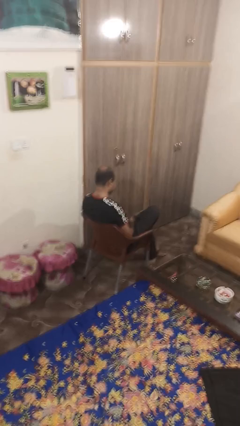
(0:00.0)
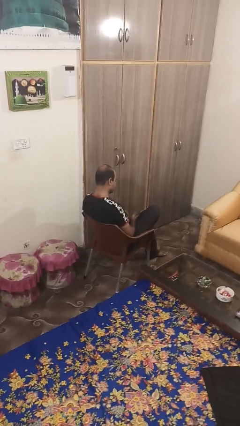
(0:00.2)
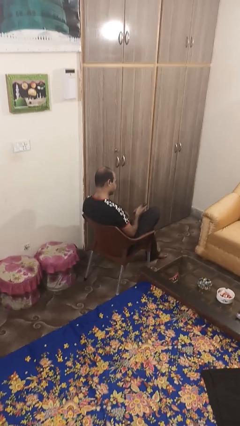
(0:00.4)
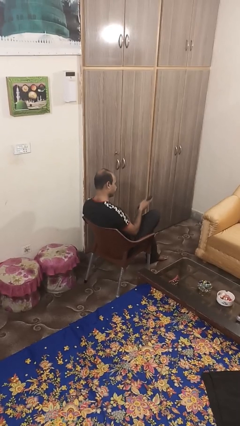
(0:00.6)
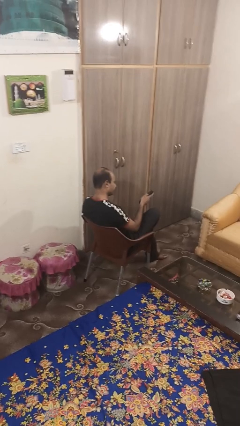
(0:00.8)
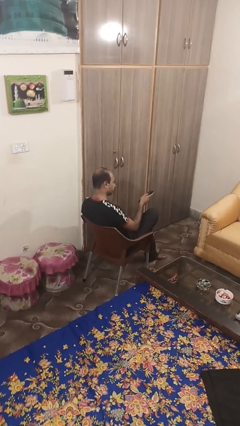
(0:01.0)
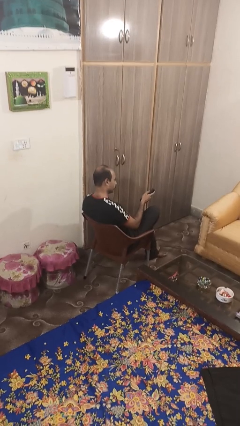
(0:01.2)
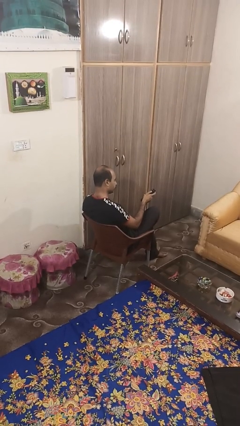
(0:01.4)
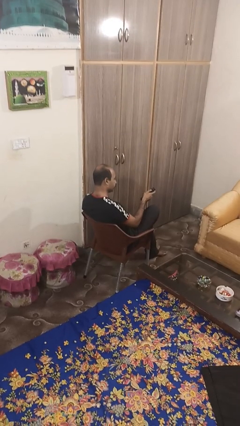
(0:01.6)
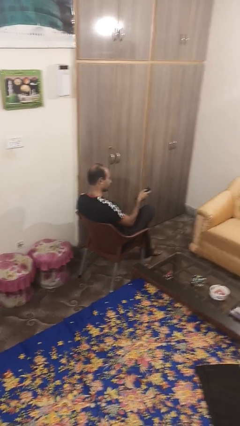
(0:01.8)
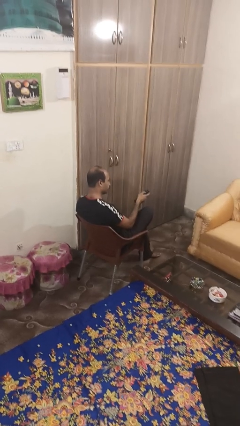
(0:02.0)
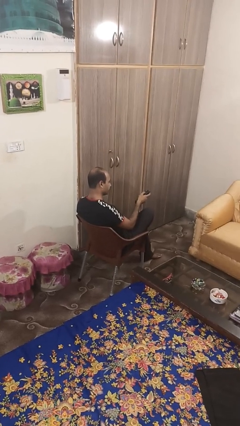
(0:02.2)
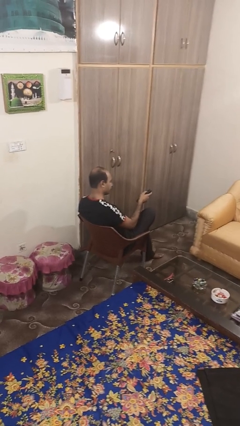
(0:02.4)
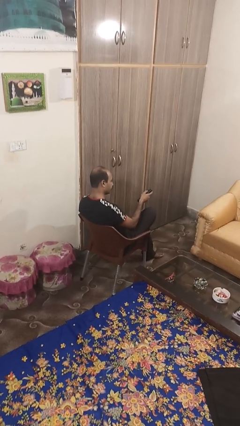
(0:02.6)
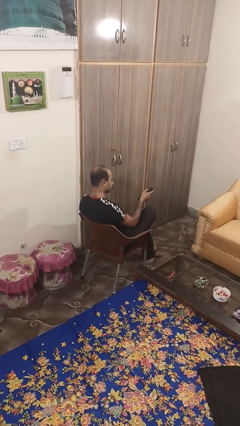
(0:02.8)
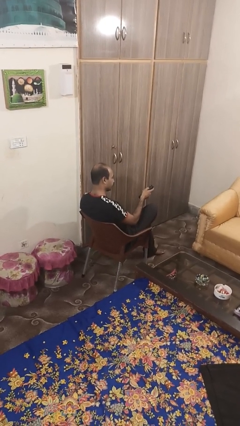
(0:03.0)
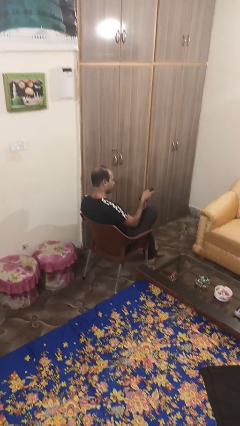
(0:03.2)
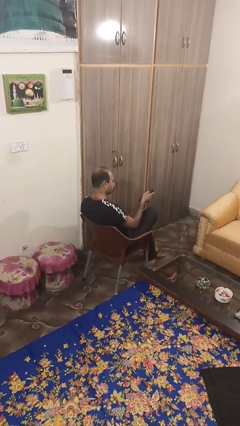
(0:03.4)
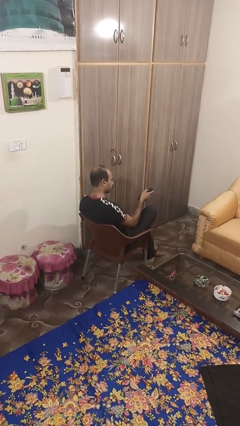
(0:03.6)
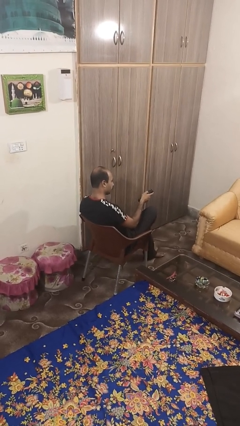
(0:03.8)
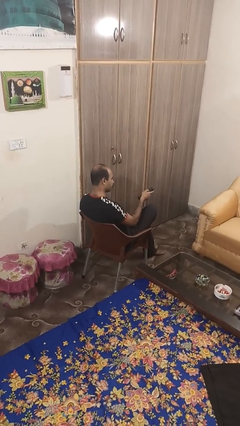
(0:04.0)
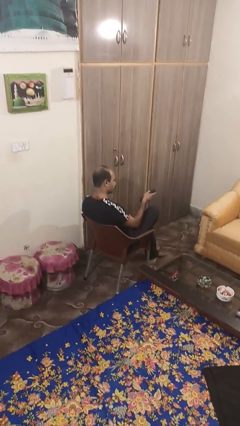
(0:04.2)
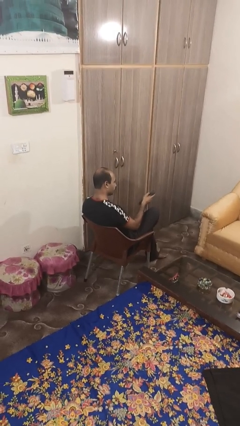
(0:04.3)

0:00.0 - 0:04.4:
person uses television remote

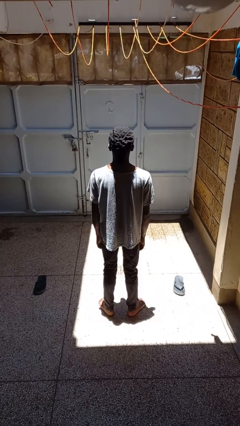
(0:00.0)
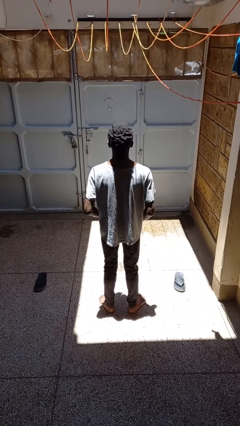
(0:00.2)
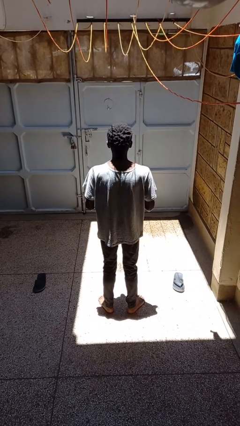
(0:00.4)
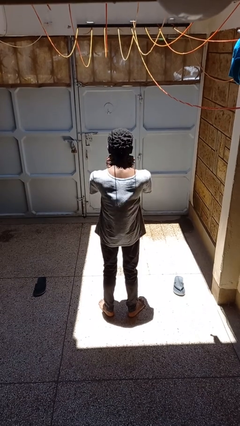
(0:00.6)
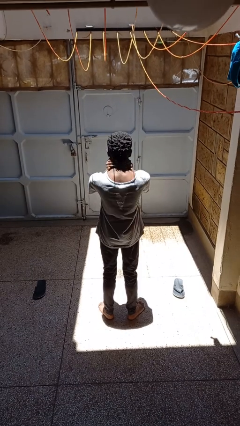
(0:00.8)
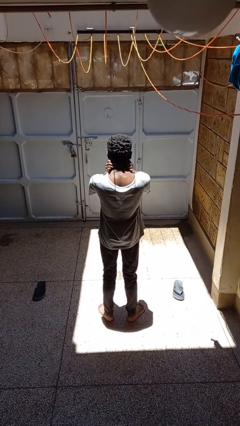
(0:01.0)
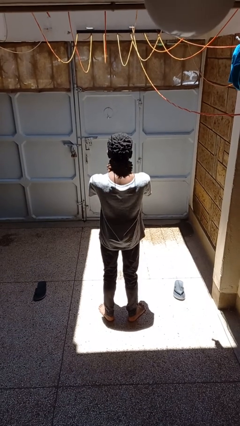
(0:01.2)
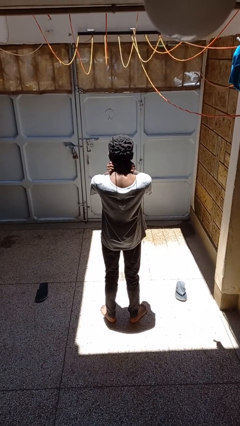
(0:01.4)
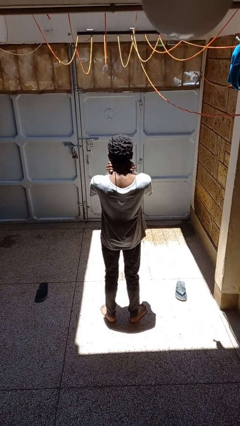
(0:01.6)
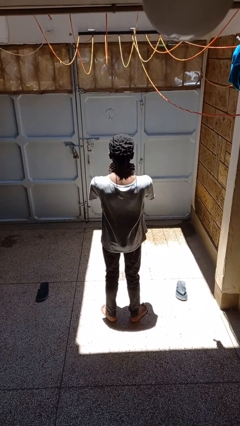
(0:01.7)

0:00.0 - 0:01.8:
person rubs neck

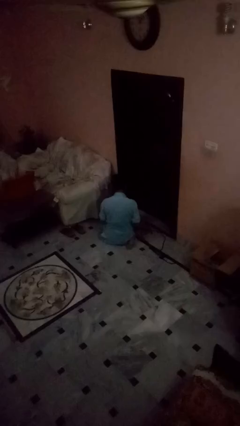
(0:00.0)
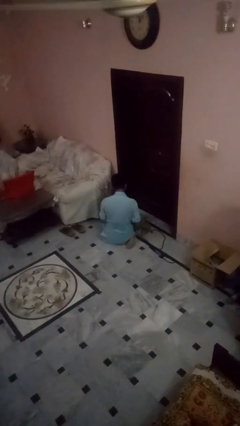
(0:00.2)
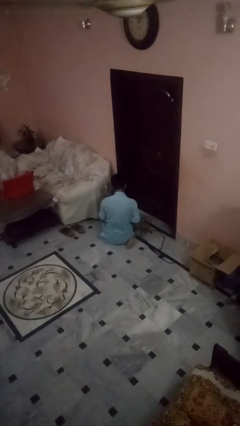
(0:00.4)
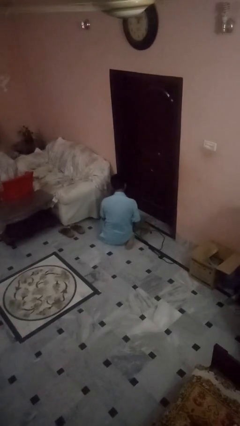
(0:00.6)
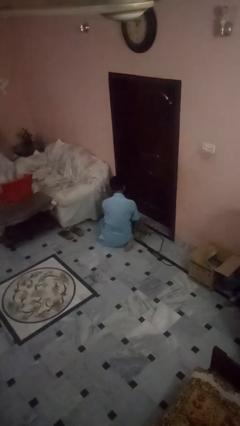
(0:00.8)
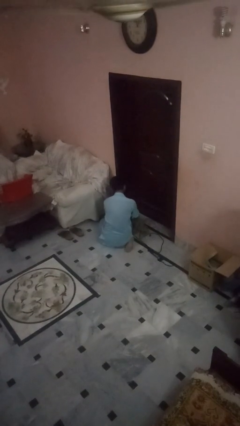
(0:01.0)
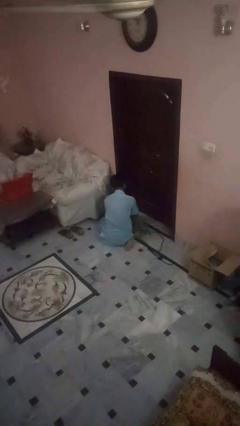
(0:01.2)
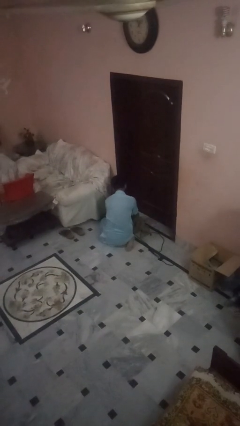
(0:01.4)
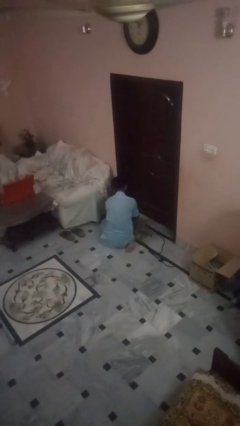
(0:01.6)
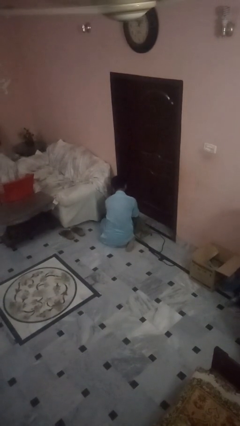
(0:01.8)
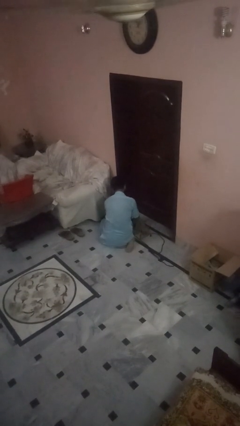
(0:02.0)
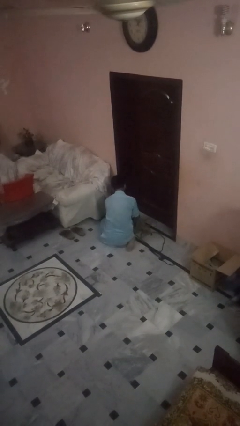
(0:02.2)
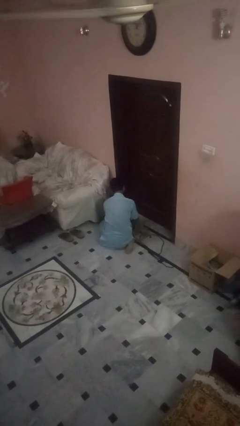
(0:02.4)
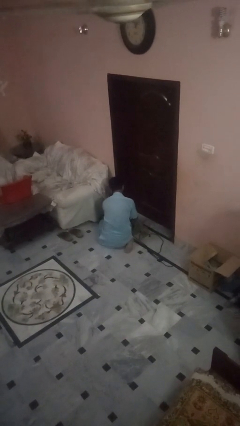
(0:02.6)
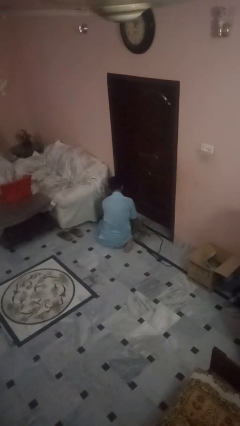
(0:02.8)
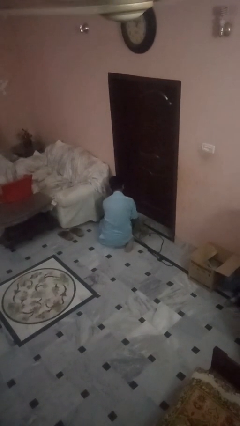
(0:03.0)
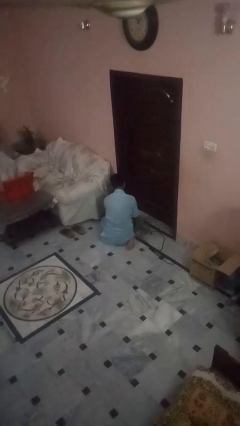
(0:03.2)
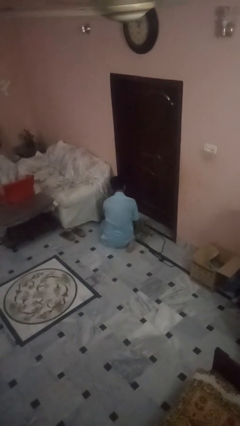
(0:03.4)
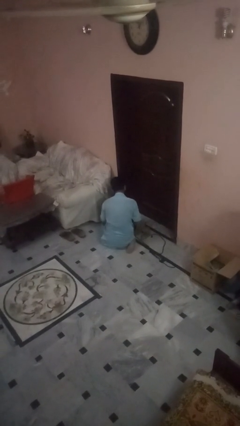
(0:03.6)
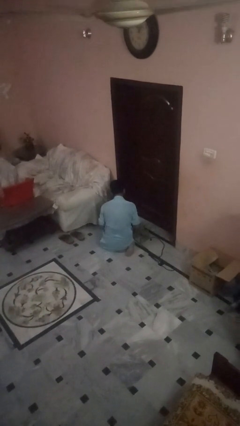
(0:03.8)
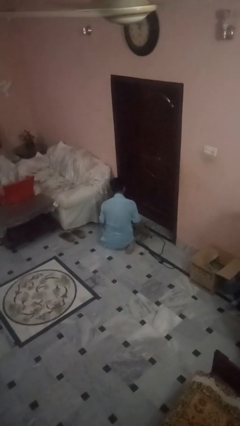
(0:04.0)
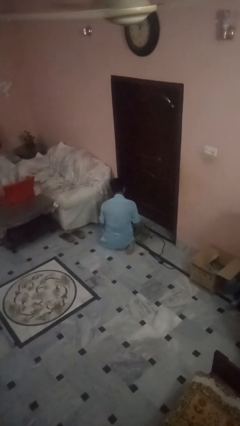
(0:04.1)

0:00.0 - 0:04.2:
person attaches leash to dog

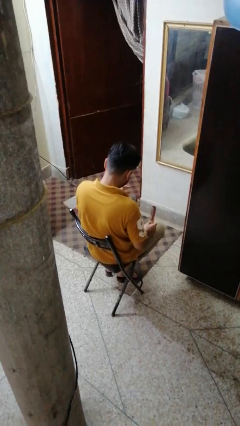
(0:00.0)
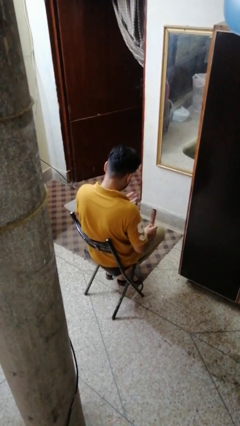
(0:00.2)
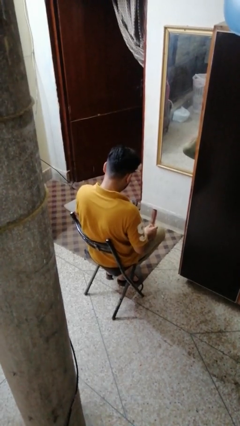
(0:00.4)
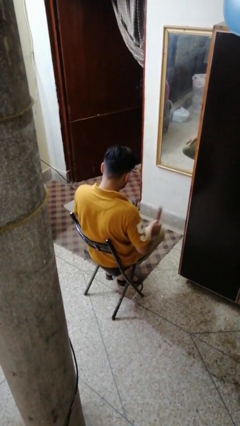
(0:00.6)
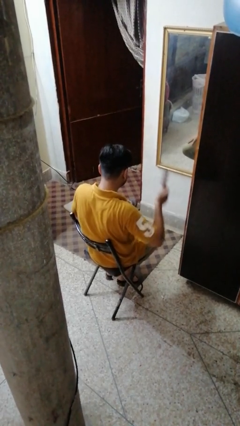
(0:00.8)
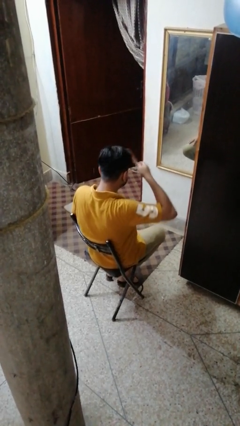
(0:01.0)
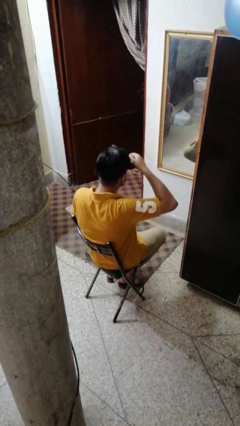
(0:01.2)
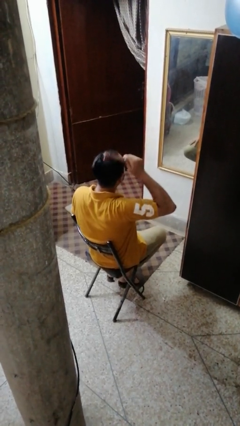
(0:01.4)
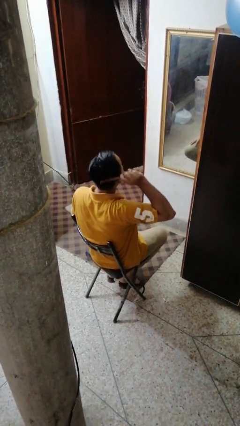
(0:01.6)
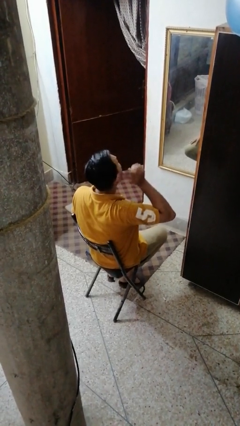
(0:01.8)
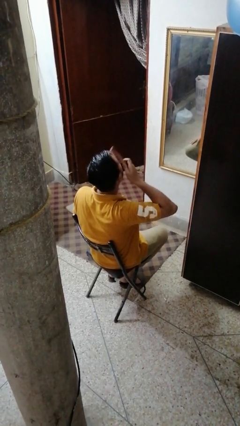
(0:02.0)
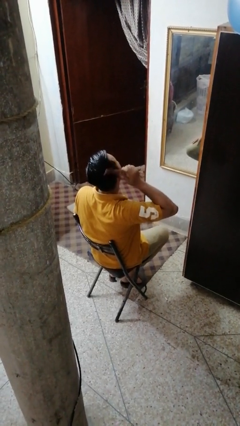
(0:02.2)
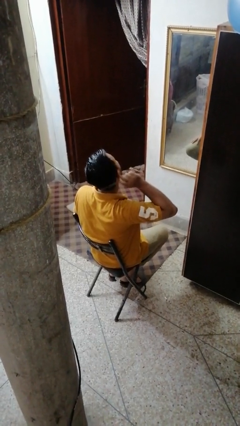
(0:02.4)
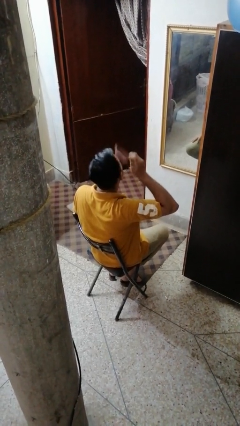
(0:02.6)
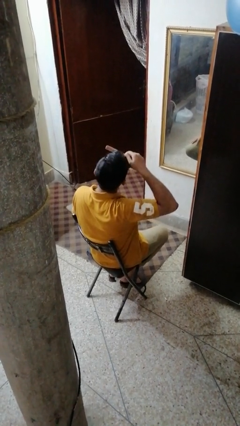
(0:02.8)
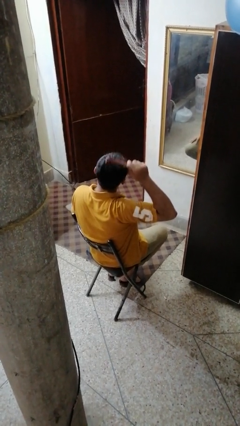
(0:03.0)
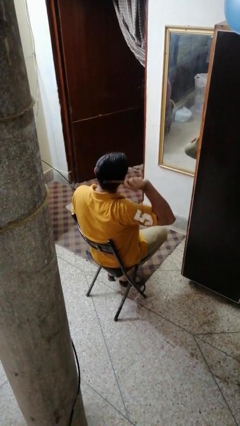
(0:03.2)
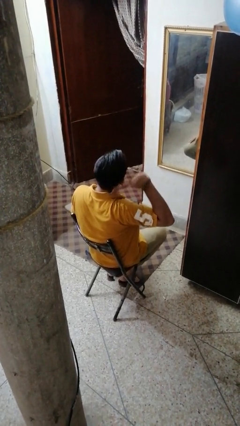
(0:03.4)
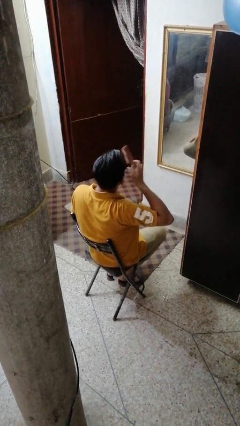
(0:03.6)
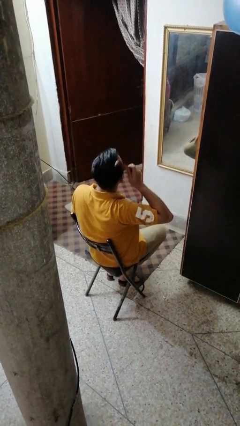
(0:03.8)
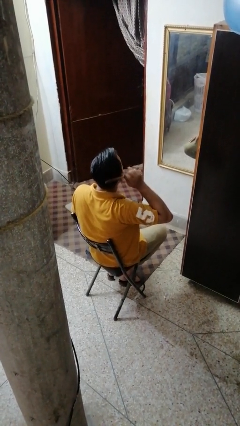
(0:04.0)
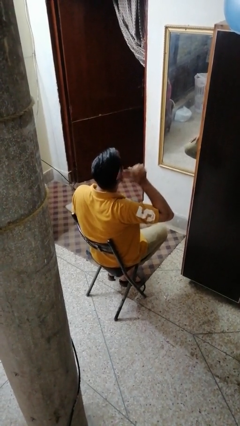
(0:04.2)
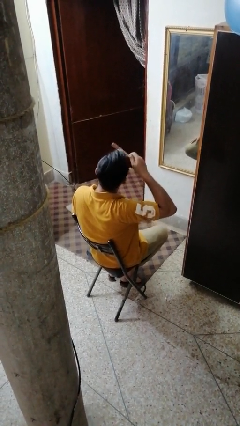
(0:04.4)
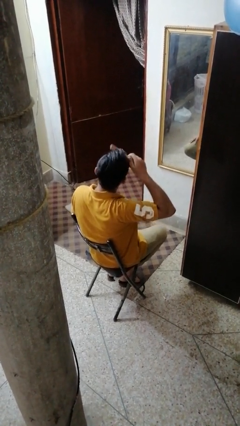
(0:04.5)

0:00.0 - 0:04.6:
person brushes hair

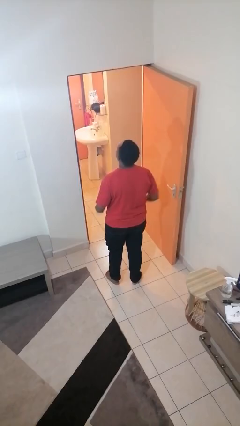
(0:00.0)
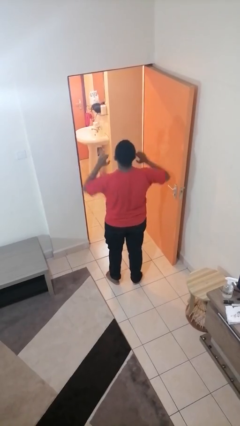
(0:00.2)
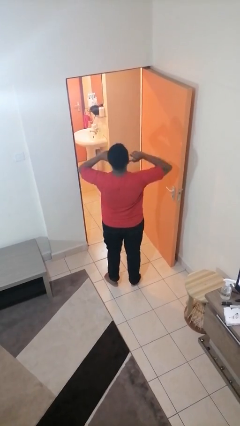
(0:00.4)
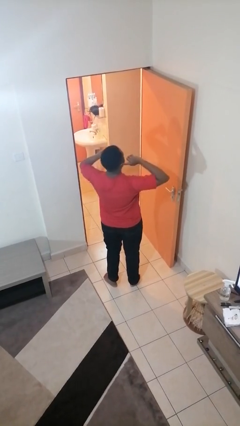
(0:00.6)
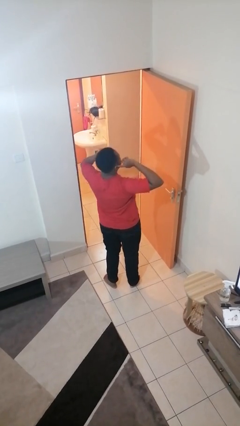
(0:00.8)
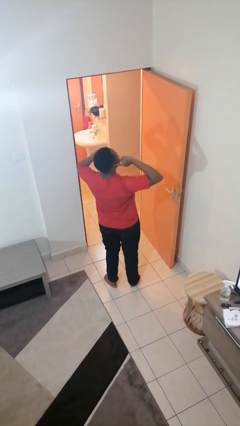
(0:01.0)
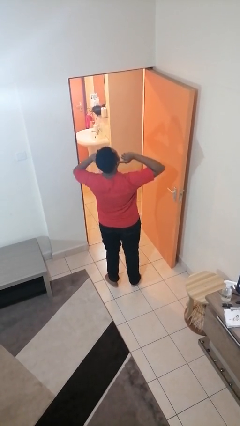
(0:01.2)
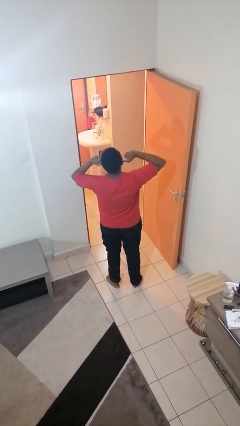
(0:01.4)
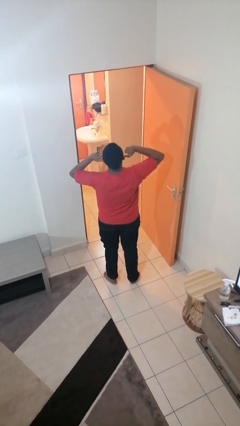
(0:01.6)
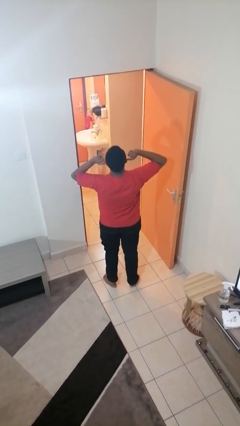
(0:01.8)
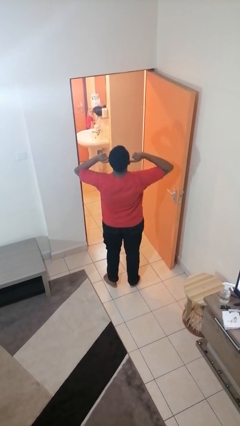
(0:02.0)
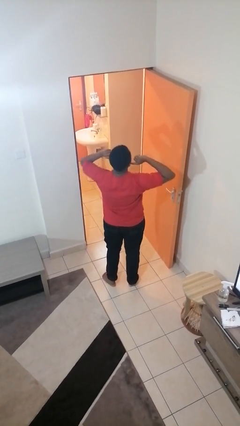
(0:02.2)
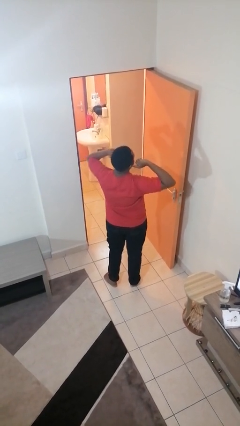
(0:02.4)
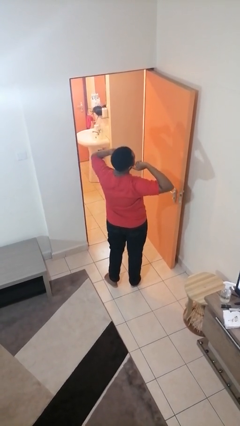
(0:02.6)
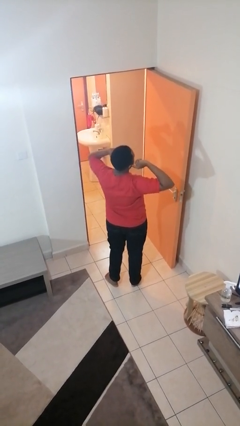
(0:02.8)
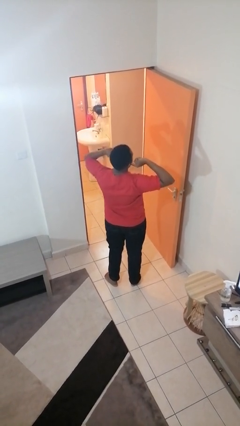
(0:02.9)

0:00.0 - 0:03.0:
person puts fingers in ear
